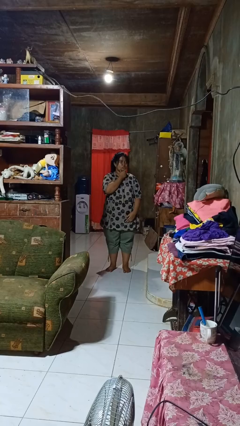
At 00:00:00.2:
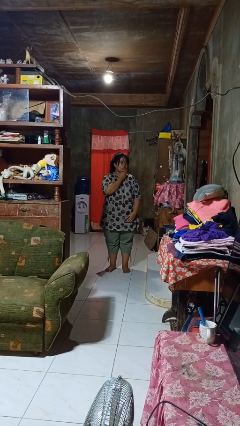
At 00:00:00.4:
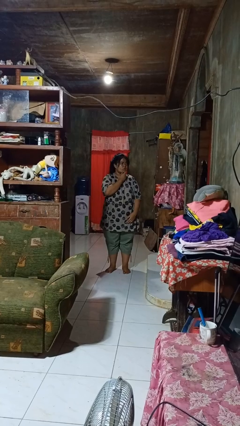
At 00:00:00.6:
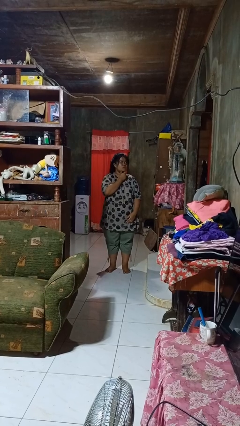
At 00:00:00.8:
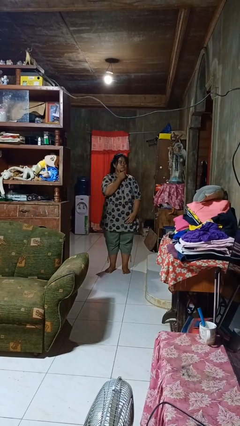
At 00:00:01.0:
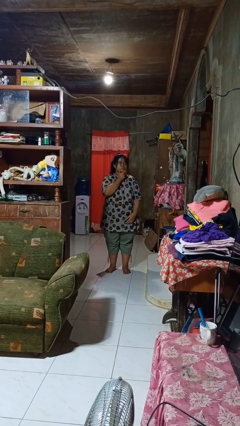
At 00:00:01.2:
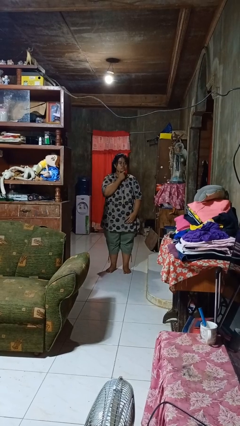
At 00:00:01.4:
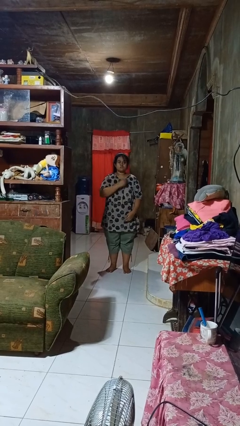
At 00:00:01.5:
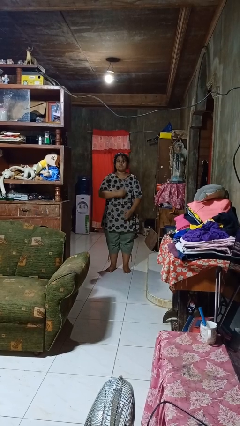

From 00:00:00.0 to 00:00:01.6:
person strokes chin

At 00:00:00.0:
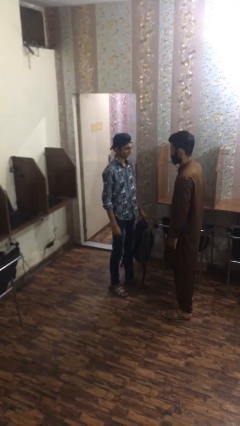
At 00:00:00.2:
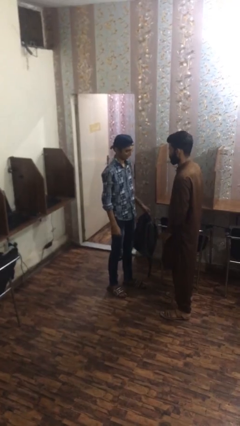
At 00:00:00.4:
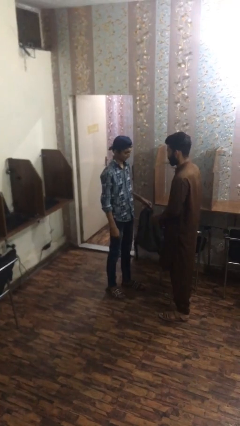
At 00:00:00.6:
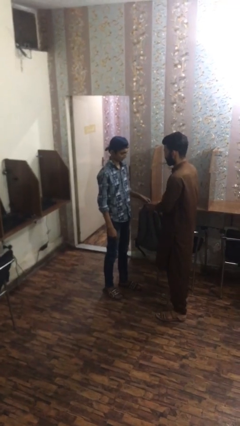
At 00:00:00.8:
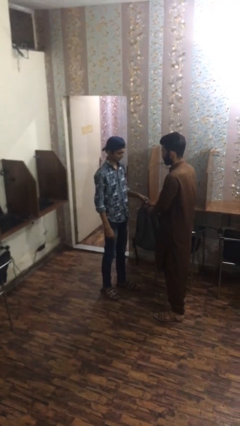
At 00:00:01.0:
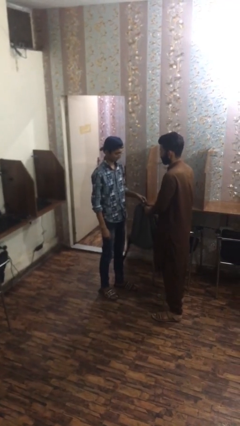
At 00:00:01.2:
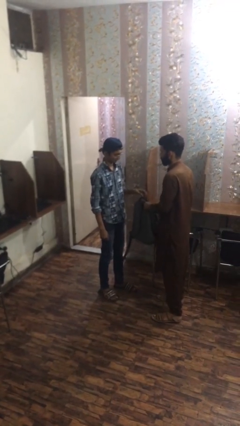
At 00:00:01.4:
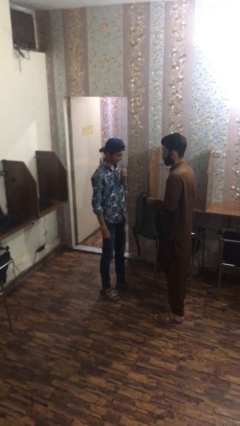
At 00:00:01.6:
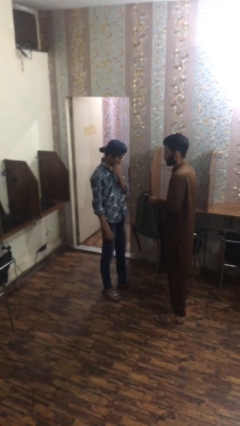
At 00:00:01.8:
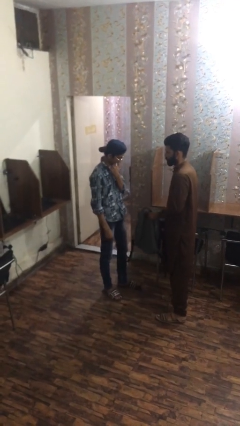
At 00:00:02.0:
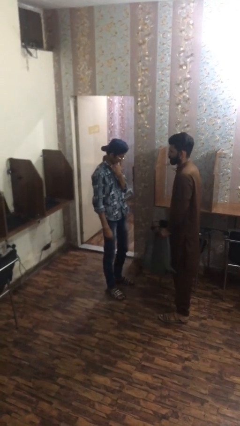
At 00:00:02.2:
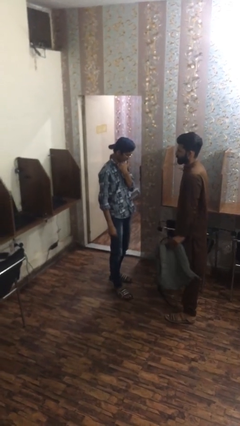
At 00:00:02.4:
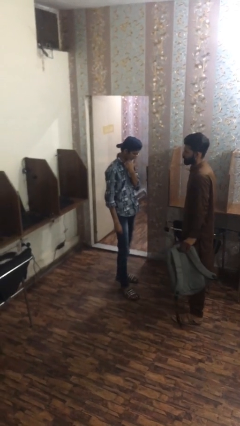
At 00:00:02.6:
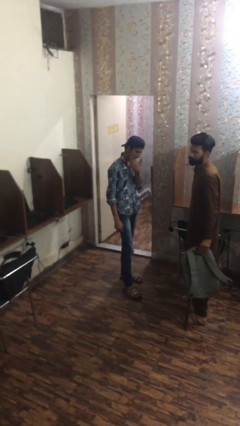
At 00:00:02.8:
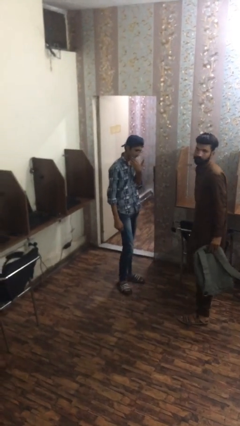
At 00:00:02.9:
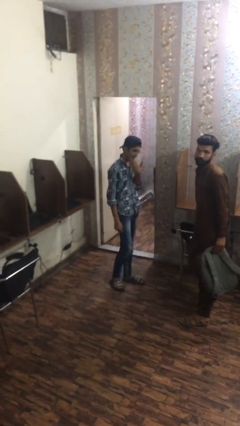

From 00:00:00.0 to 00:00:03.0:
person transfers object to person

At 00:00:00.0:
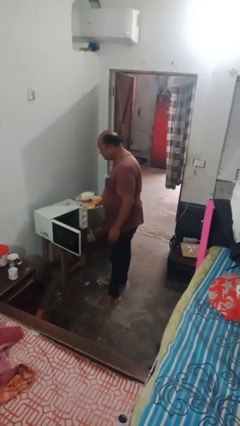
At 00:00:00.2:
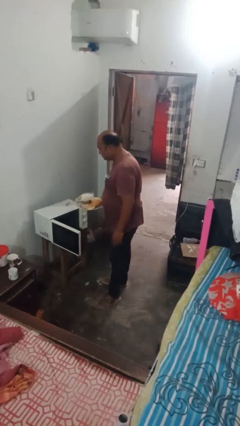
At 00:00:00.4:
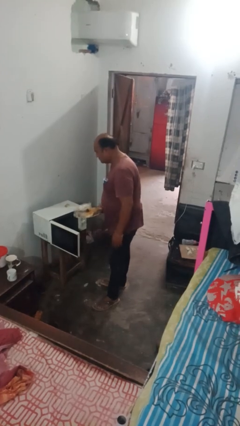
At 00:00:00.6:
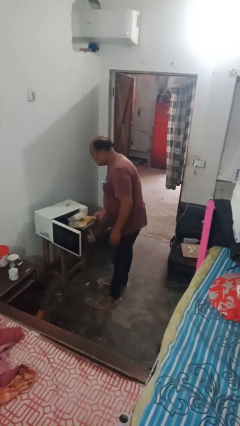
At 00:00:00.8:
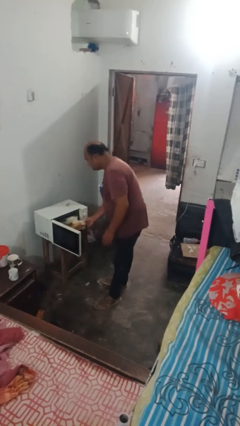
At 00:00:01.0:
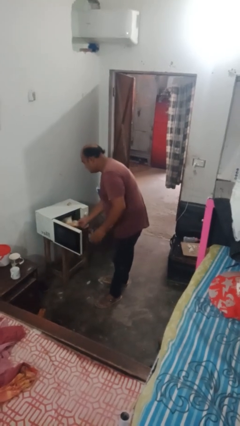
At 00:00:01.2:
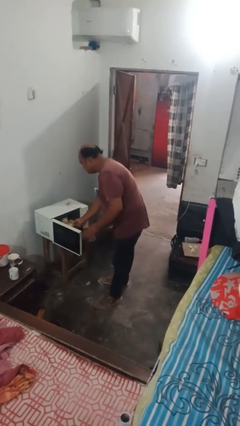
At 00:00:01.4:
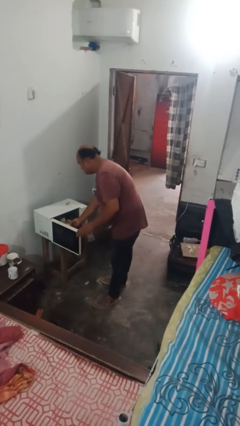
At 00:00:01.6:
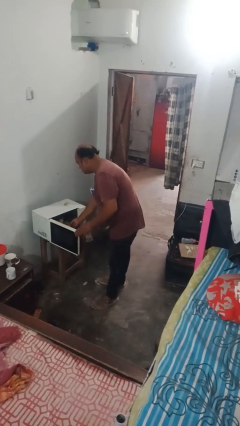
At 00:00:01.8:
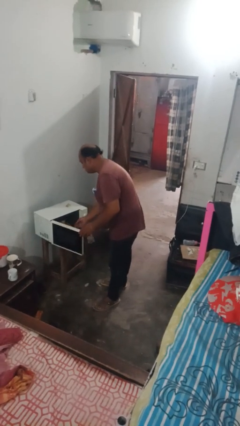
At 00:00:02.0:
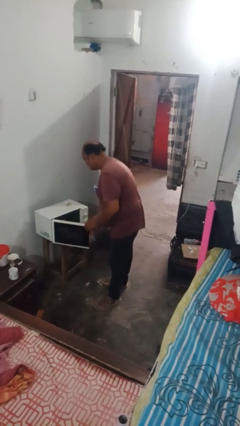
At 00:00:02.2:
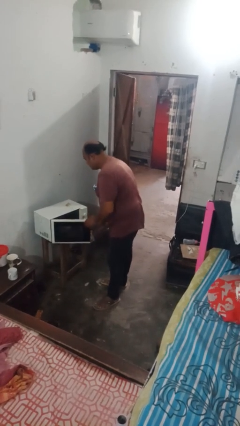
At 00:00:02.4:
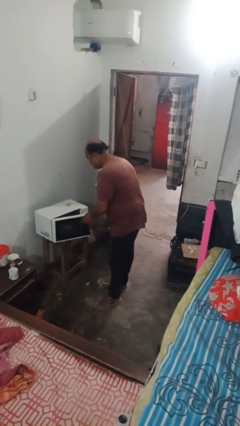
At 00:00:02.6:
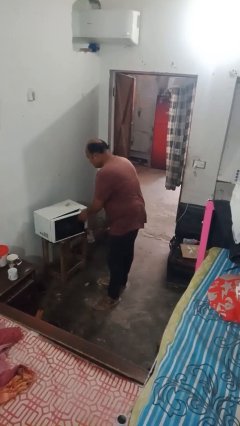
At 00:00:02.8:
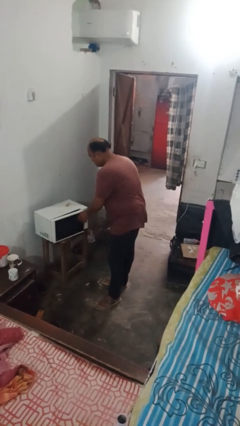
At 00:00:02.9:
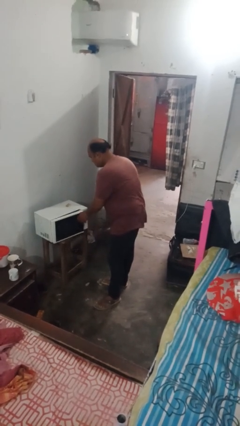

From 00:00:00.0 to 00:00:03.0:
person puts object into microwave

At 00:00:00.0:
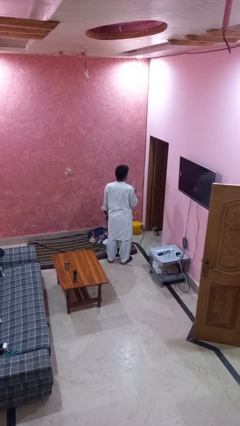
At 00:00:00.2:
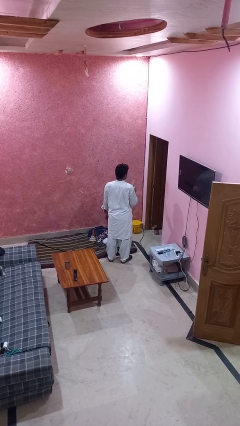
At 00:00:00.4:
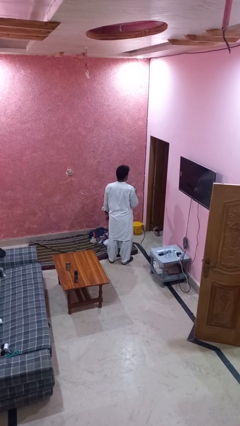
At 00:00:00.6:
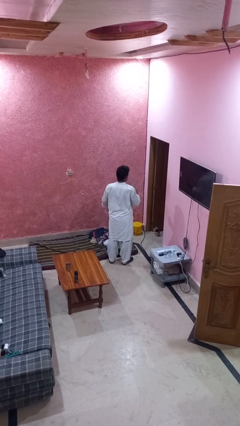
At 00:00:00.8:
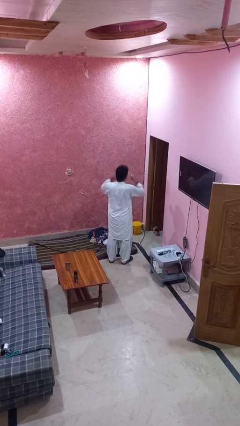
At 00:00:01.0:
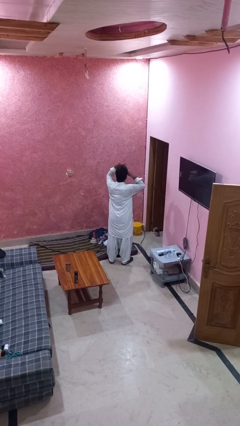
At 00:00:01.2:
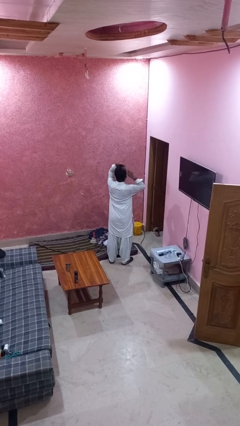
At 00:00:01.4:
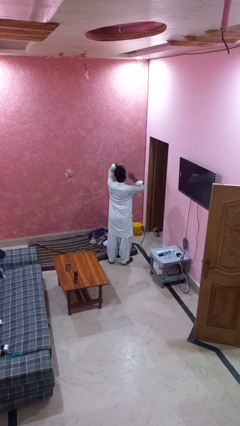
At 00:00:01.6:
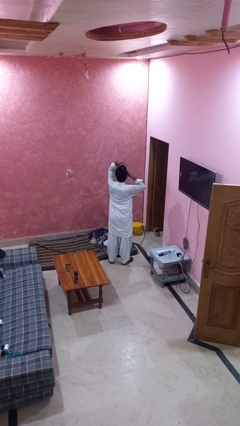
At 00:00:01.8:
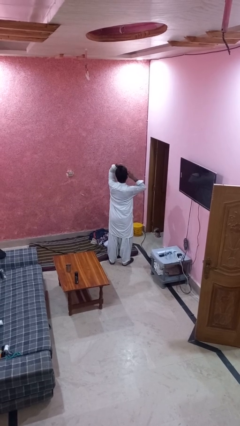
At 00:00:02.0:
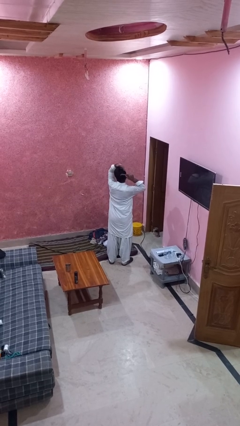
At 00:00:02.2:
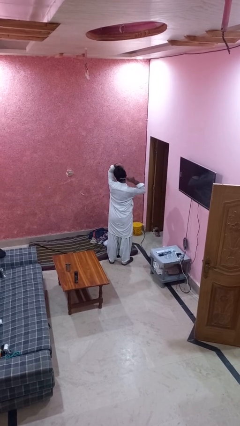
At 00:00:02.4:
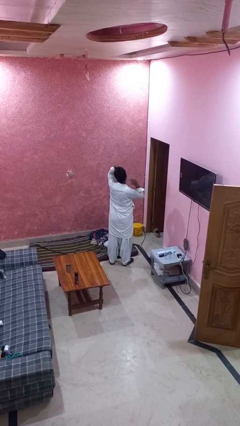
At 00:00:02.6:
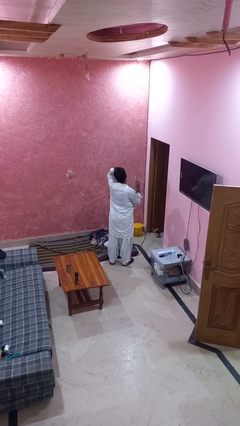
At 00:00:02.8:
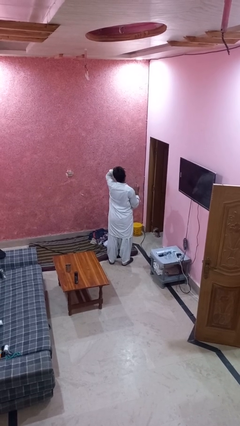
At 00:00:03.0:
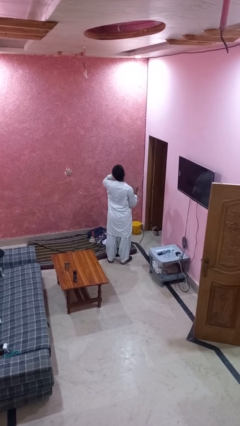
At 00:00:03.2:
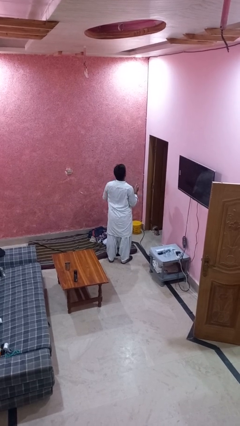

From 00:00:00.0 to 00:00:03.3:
person brushes hair

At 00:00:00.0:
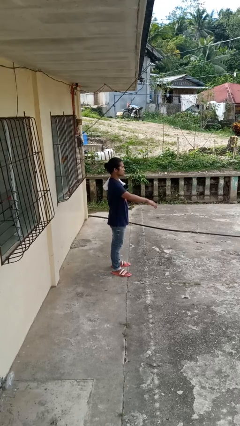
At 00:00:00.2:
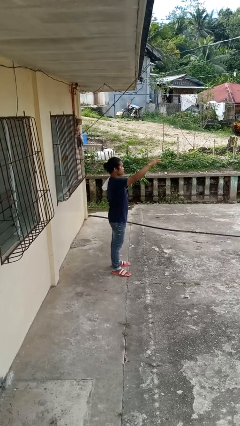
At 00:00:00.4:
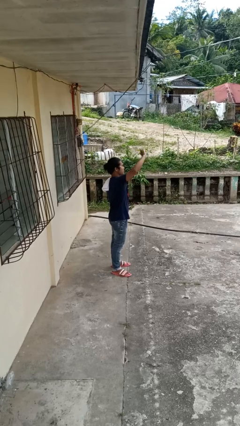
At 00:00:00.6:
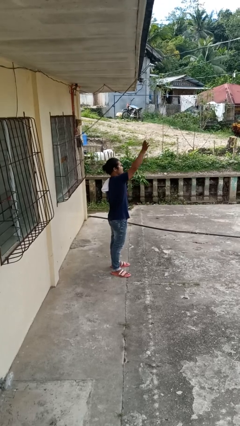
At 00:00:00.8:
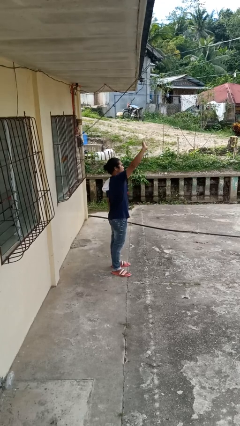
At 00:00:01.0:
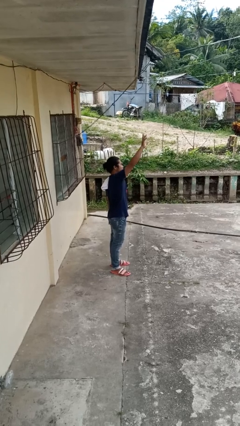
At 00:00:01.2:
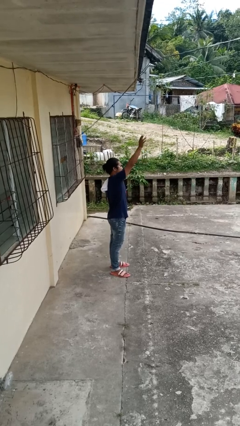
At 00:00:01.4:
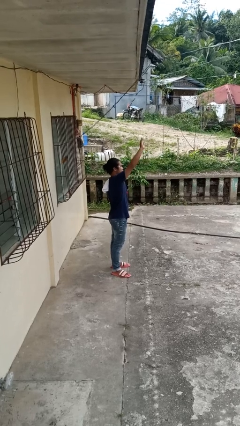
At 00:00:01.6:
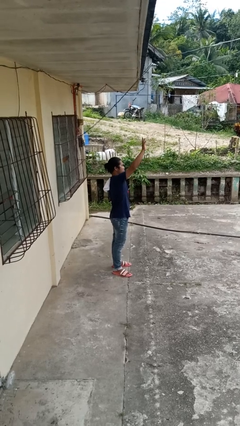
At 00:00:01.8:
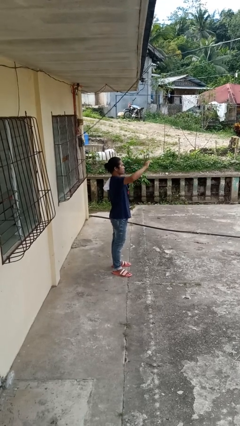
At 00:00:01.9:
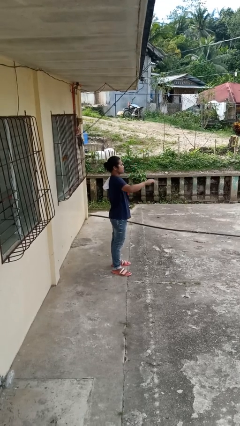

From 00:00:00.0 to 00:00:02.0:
person waves at person

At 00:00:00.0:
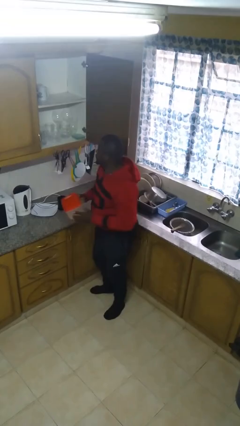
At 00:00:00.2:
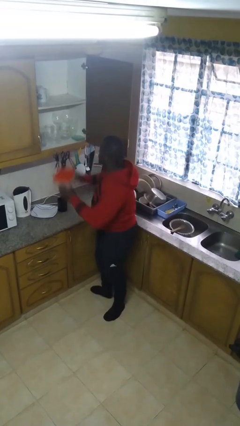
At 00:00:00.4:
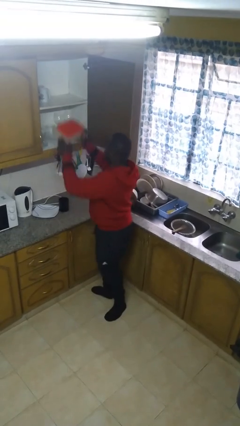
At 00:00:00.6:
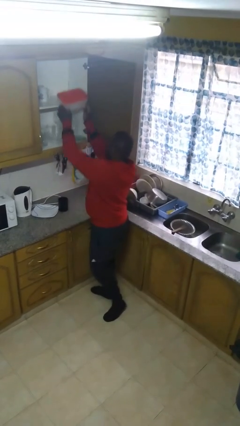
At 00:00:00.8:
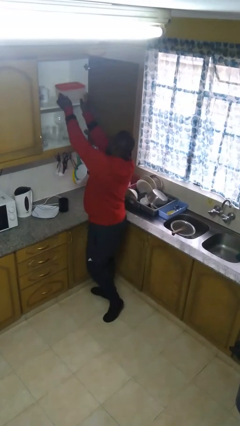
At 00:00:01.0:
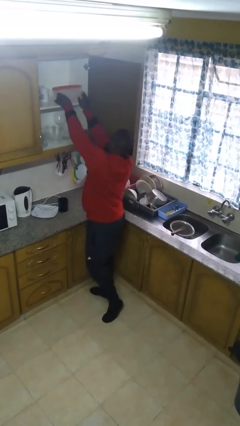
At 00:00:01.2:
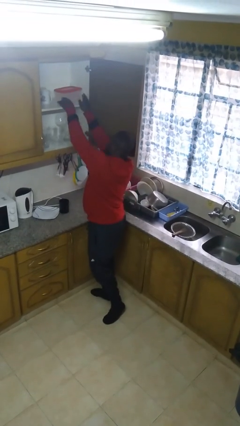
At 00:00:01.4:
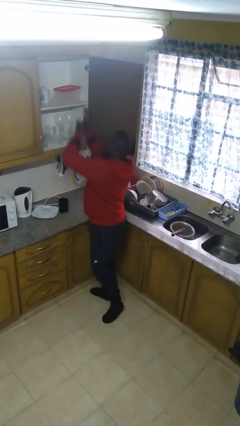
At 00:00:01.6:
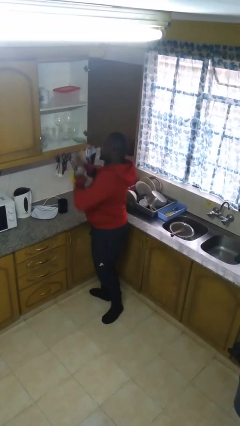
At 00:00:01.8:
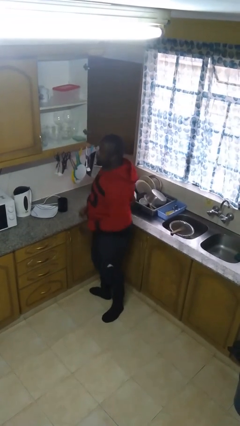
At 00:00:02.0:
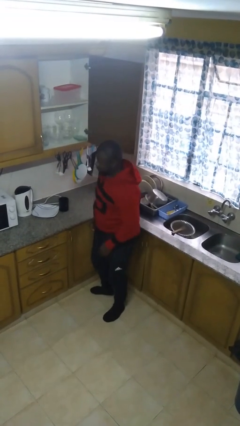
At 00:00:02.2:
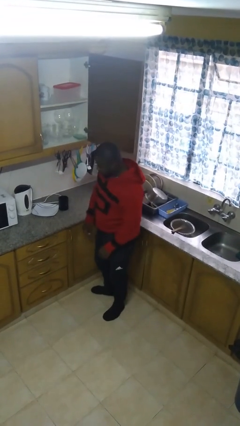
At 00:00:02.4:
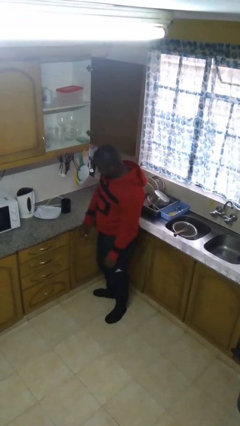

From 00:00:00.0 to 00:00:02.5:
person puts down object into cabinet

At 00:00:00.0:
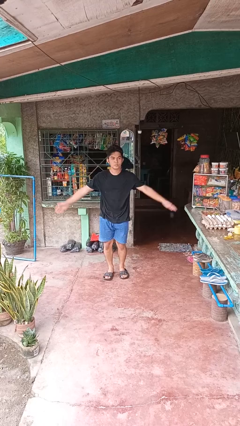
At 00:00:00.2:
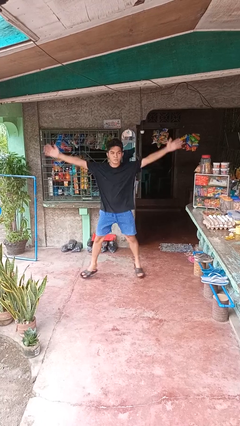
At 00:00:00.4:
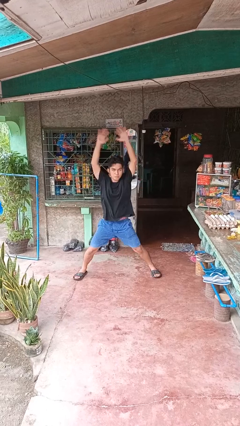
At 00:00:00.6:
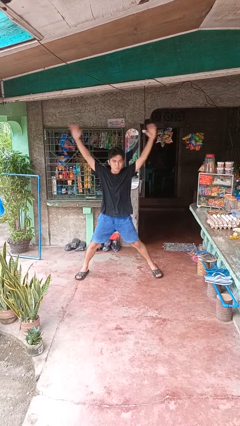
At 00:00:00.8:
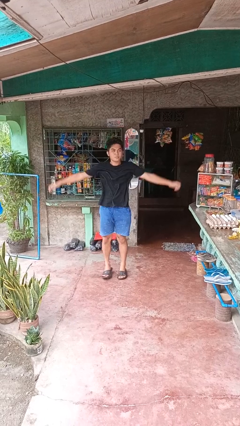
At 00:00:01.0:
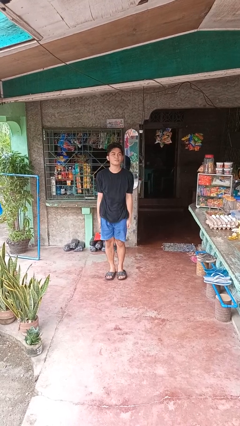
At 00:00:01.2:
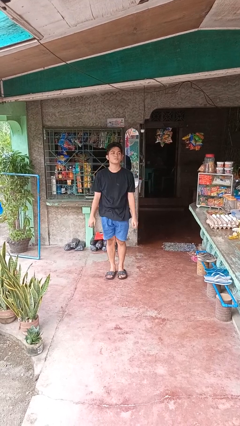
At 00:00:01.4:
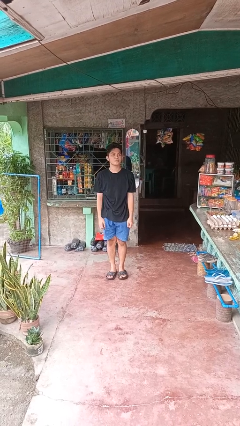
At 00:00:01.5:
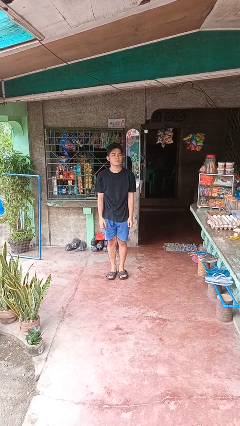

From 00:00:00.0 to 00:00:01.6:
person exercises with jumping jacks
